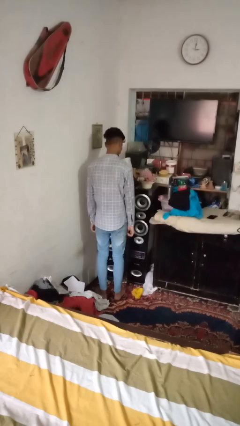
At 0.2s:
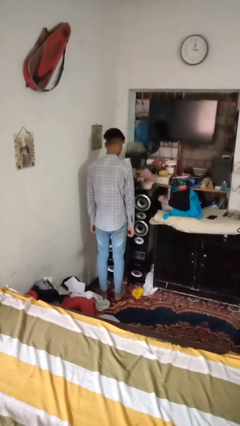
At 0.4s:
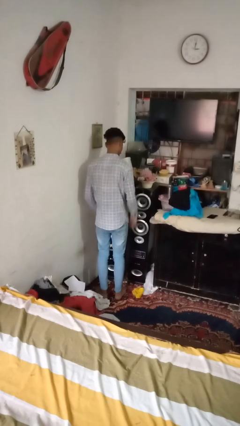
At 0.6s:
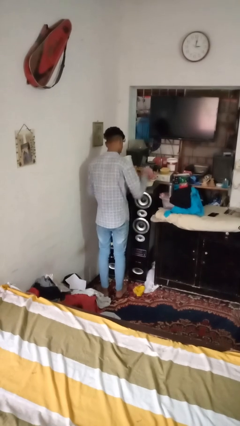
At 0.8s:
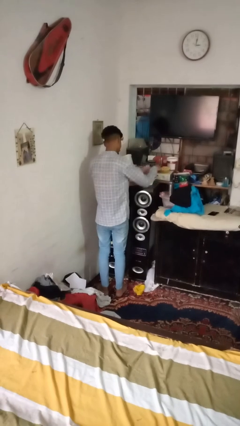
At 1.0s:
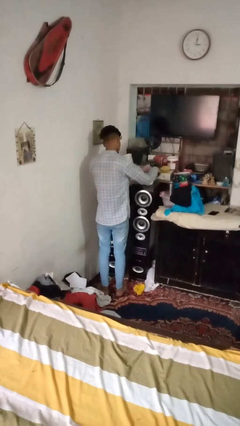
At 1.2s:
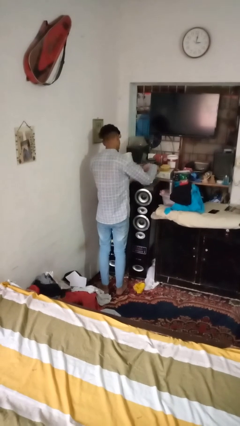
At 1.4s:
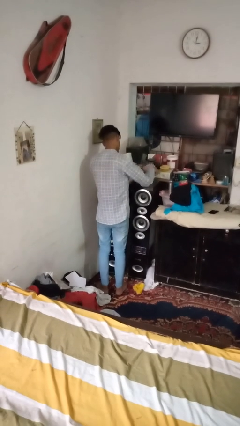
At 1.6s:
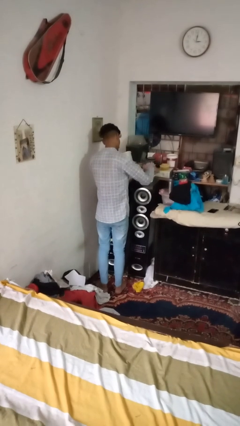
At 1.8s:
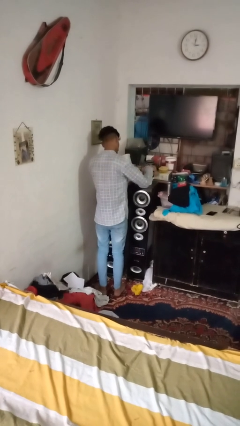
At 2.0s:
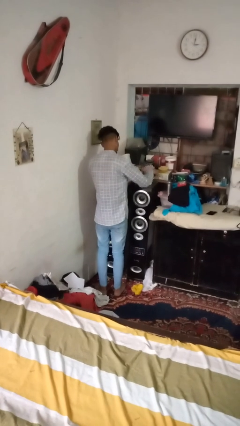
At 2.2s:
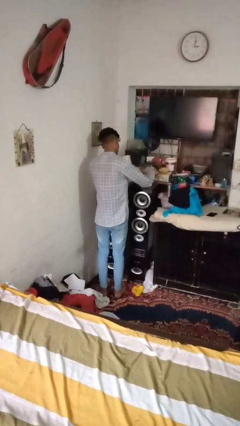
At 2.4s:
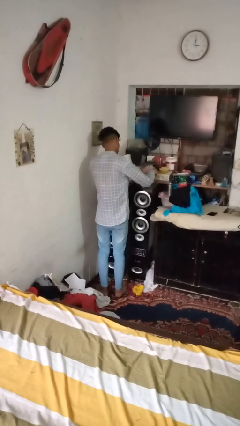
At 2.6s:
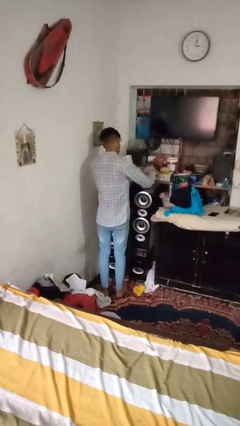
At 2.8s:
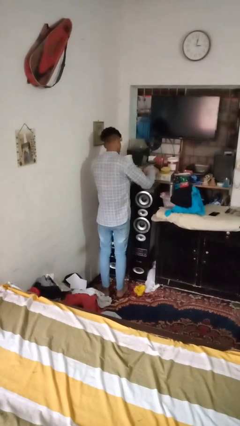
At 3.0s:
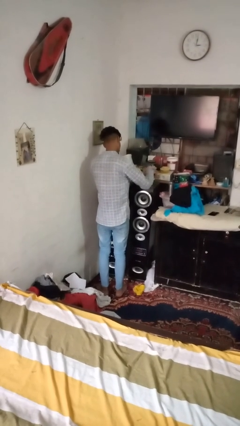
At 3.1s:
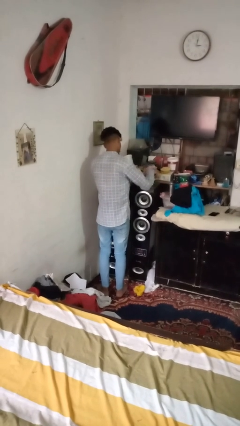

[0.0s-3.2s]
person arranges flowers in vase

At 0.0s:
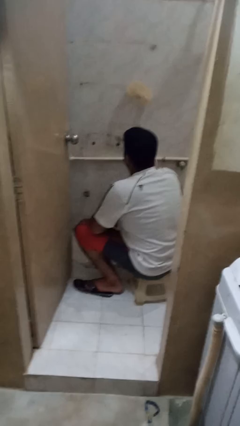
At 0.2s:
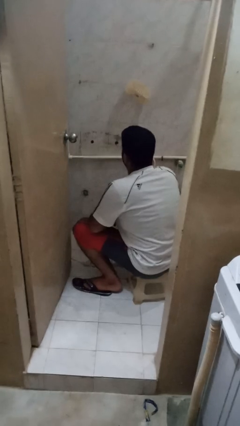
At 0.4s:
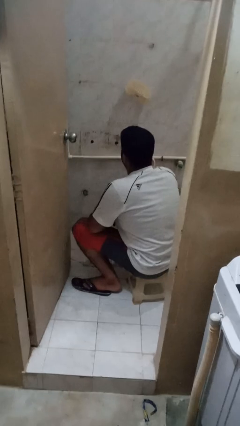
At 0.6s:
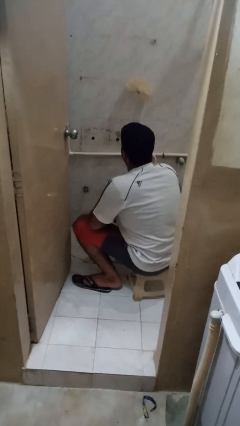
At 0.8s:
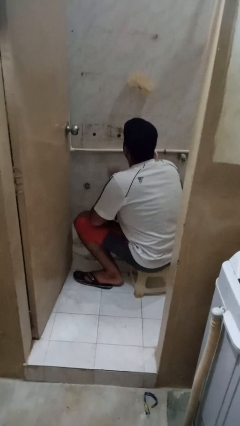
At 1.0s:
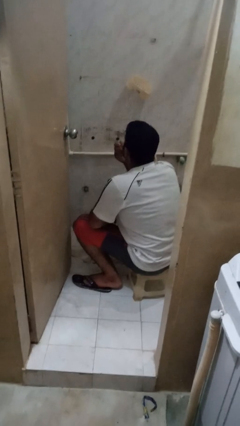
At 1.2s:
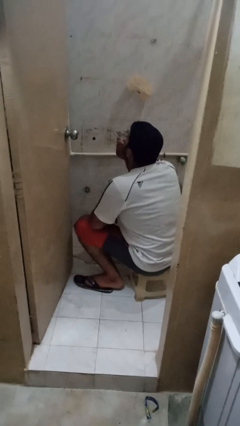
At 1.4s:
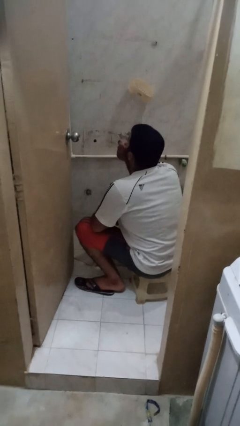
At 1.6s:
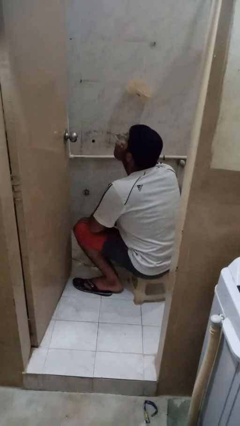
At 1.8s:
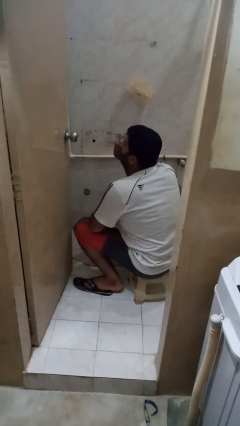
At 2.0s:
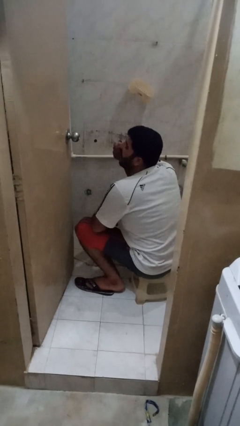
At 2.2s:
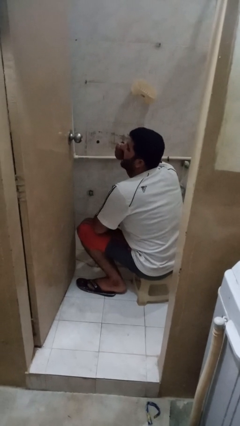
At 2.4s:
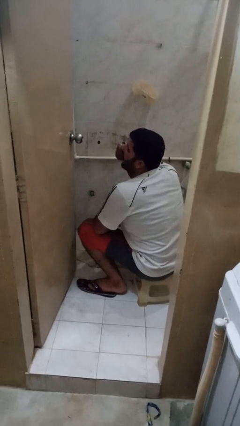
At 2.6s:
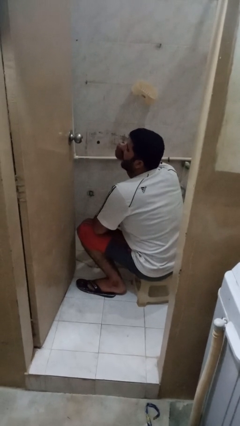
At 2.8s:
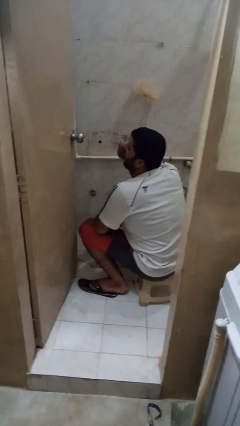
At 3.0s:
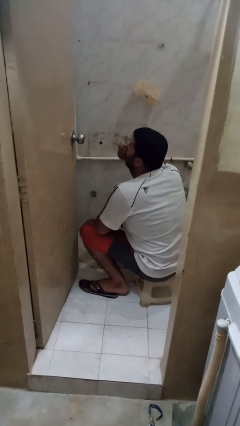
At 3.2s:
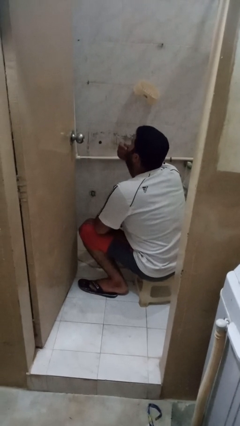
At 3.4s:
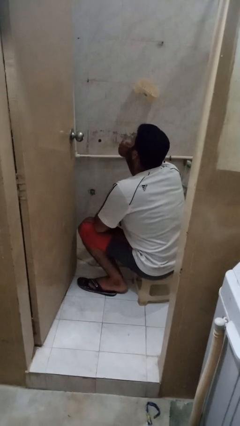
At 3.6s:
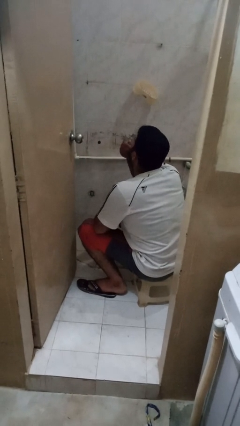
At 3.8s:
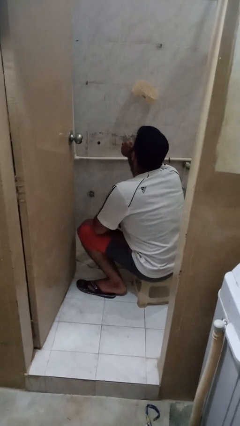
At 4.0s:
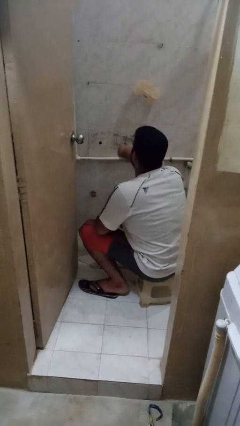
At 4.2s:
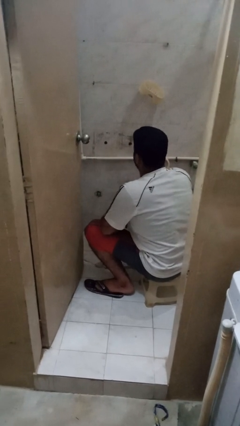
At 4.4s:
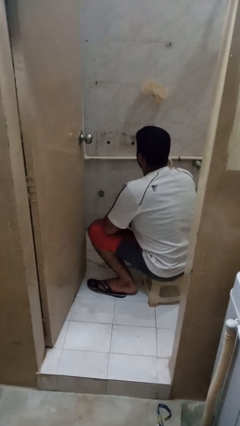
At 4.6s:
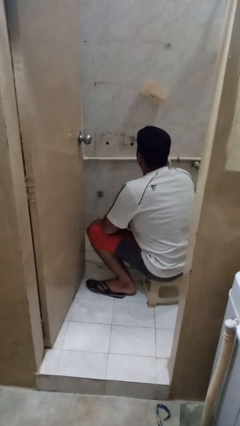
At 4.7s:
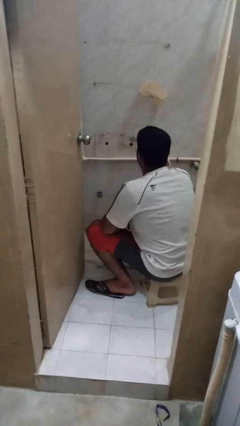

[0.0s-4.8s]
person flosses

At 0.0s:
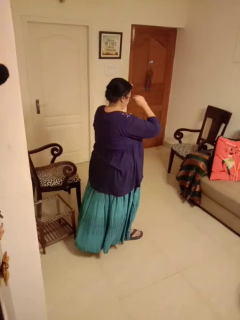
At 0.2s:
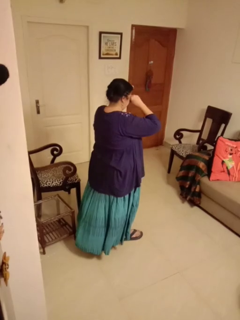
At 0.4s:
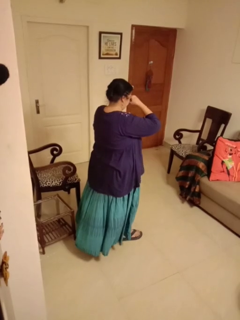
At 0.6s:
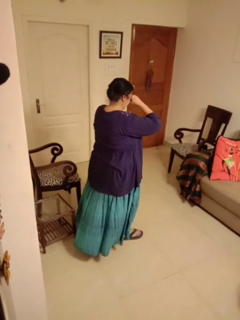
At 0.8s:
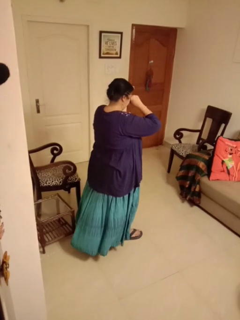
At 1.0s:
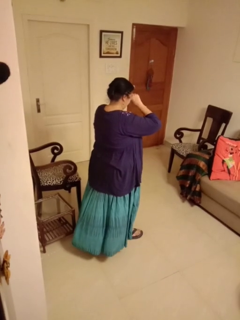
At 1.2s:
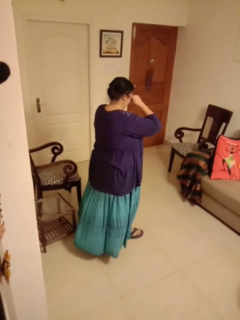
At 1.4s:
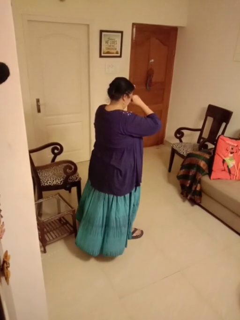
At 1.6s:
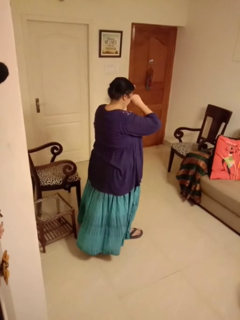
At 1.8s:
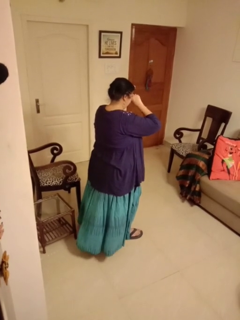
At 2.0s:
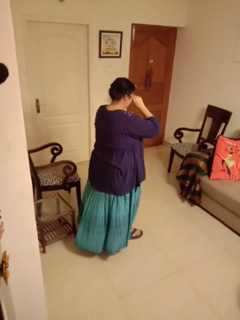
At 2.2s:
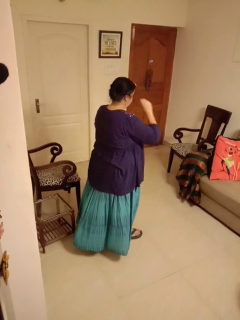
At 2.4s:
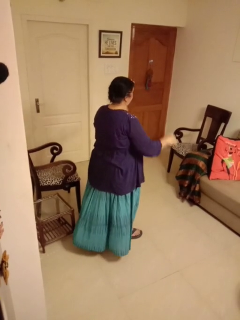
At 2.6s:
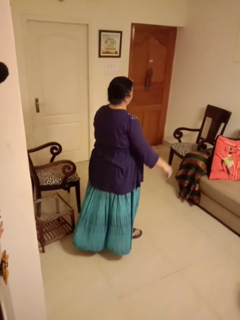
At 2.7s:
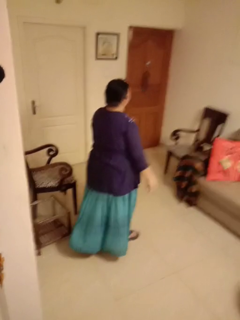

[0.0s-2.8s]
person rubs eyes

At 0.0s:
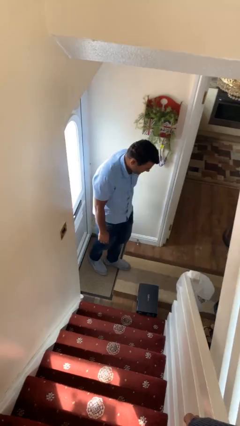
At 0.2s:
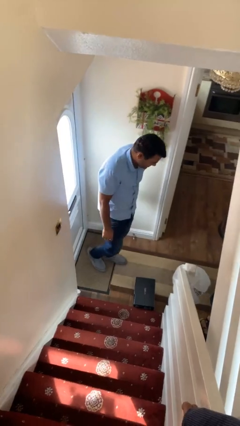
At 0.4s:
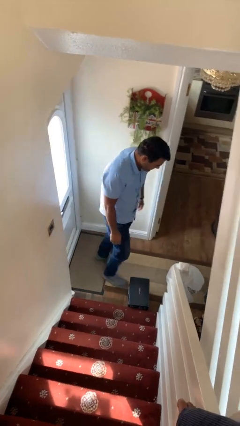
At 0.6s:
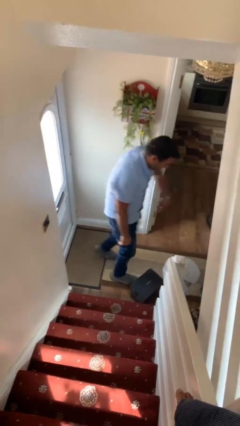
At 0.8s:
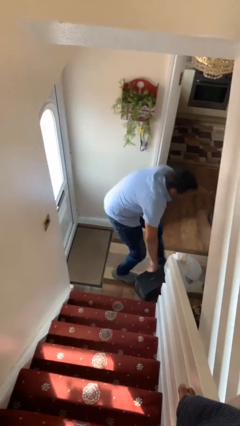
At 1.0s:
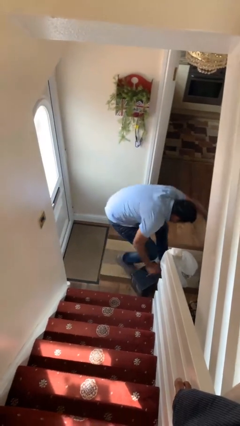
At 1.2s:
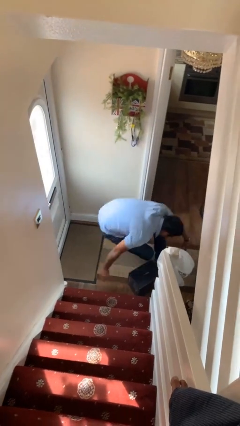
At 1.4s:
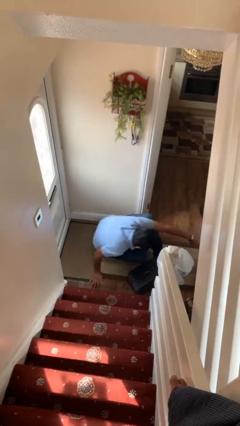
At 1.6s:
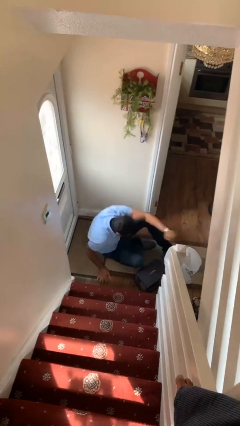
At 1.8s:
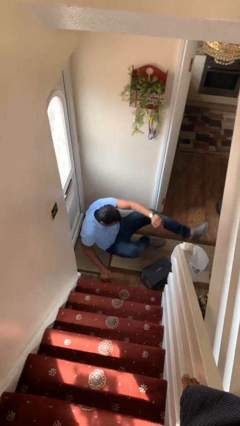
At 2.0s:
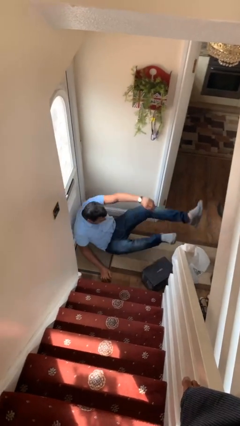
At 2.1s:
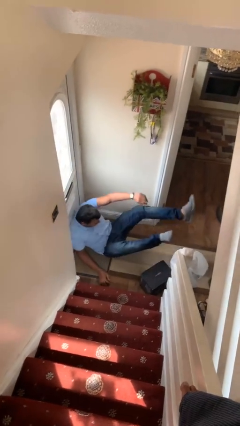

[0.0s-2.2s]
person trips on object on floor

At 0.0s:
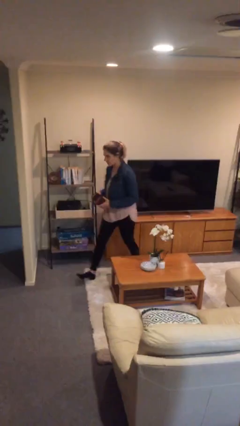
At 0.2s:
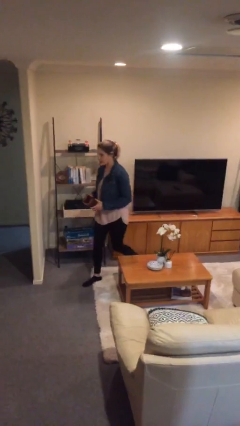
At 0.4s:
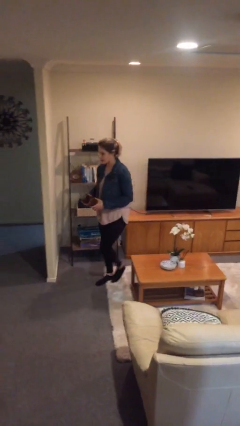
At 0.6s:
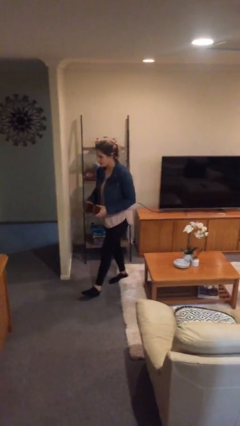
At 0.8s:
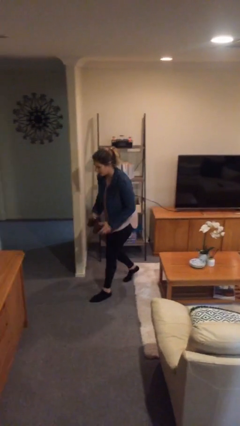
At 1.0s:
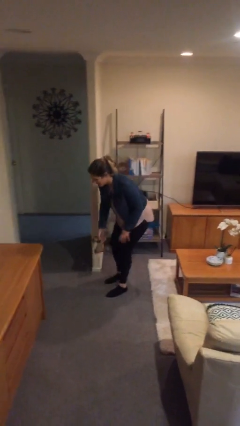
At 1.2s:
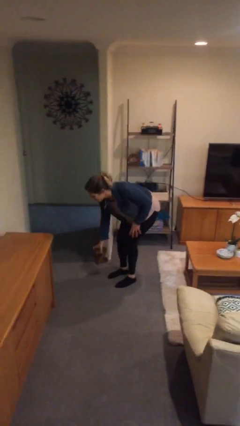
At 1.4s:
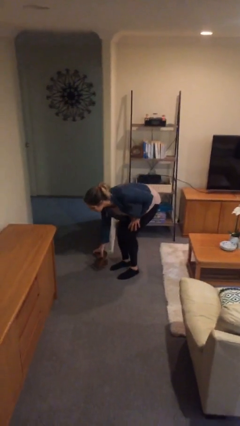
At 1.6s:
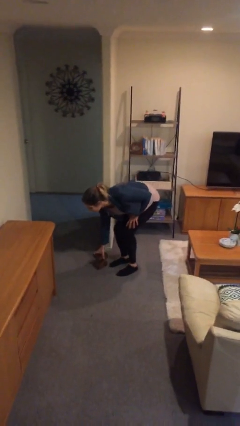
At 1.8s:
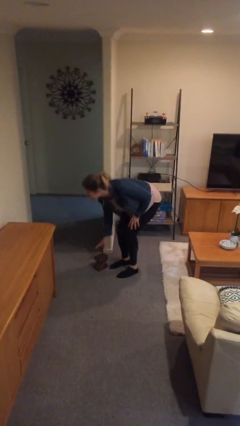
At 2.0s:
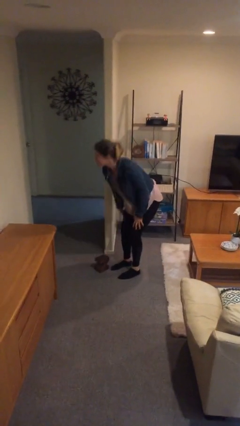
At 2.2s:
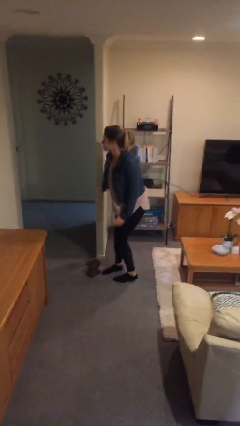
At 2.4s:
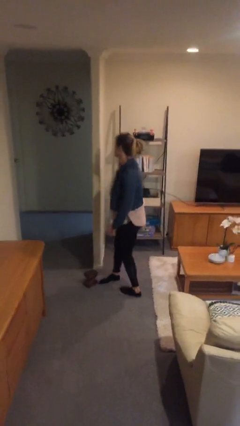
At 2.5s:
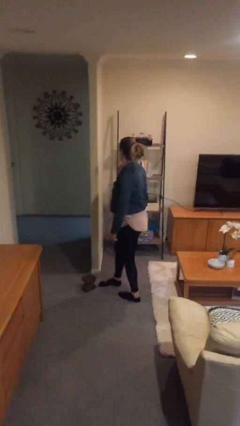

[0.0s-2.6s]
person puts down object on floor

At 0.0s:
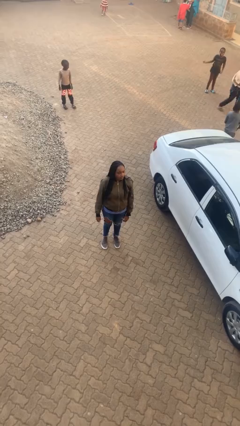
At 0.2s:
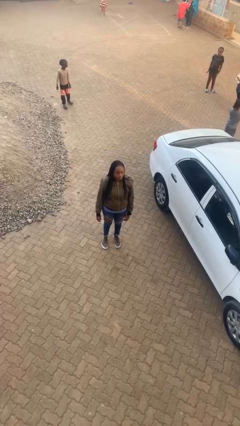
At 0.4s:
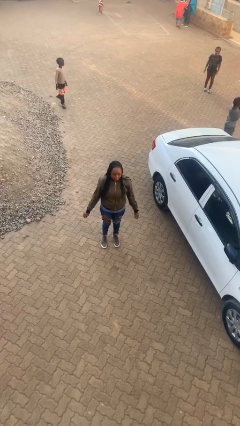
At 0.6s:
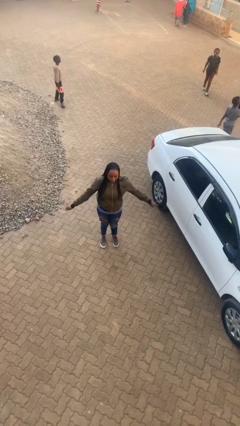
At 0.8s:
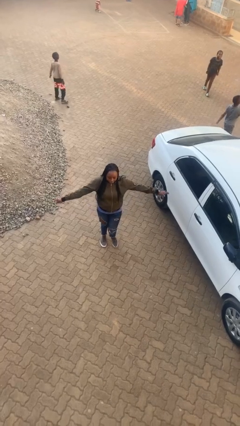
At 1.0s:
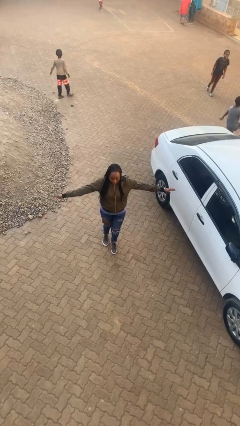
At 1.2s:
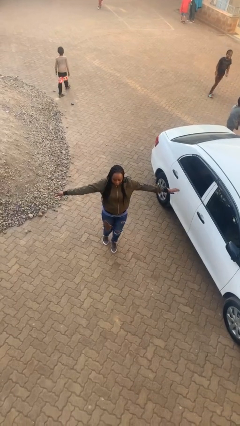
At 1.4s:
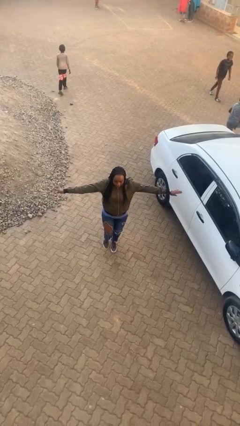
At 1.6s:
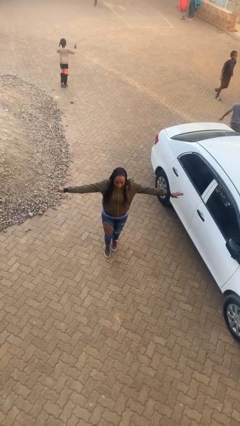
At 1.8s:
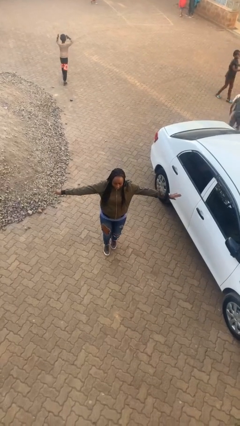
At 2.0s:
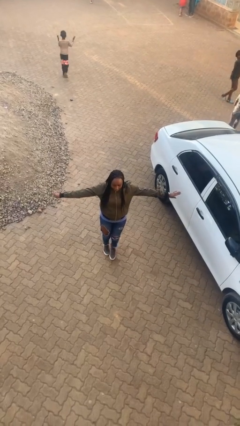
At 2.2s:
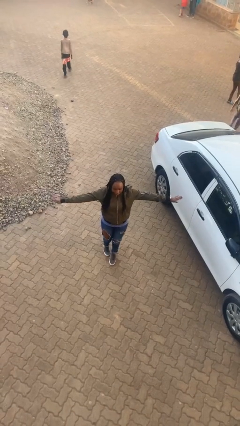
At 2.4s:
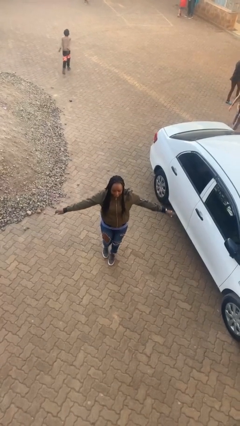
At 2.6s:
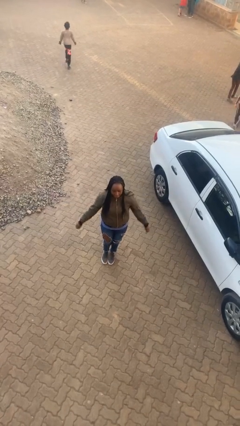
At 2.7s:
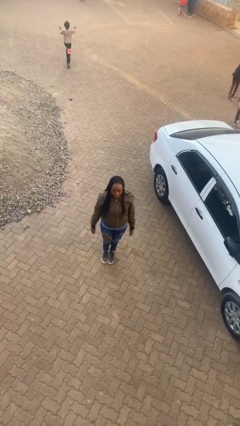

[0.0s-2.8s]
person walks tiptoe
